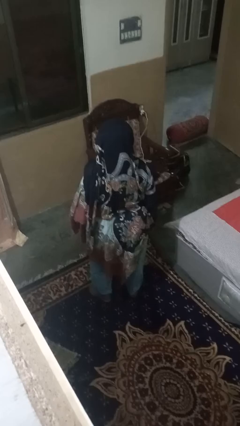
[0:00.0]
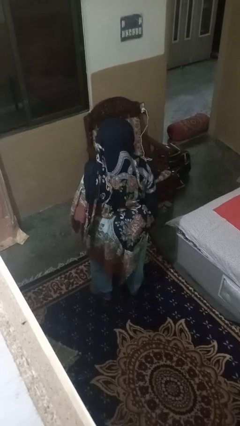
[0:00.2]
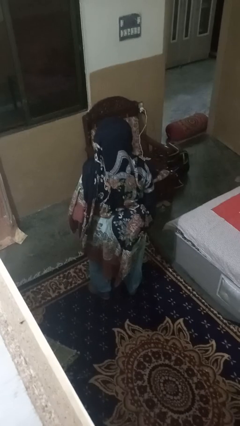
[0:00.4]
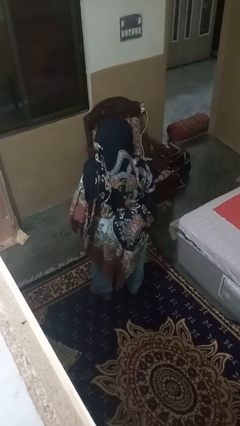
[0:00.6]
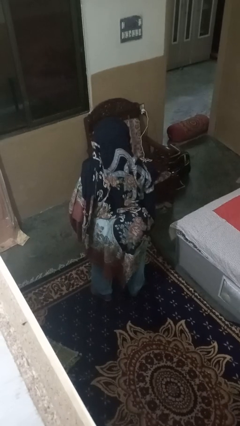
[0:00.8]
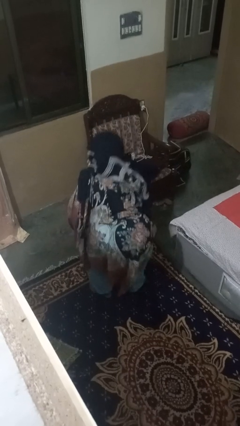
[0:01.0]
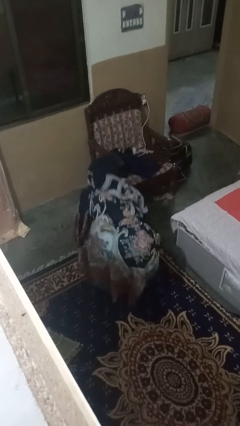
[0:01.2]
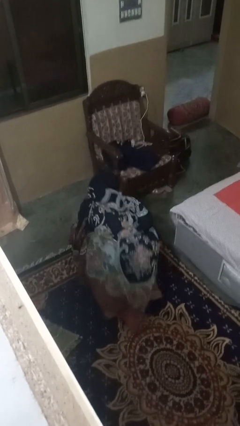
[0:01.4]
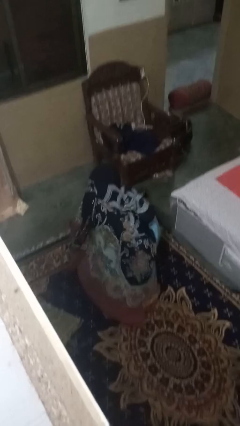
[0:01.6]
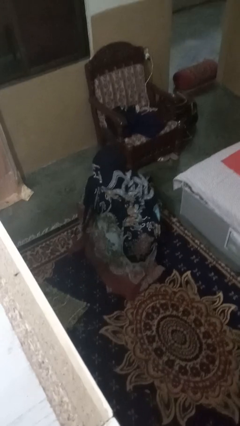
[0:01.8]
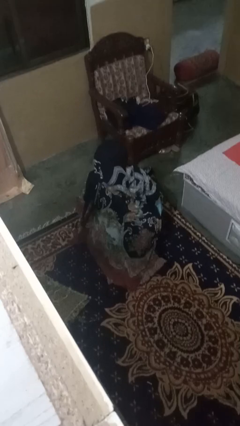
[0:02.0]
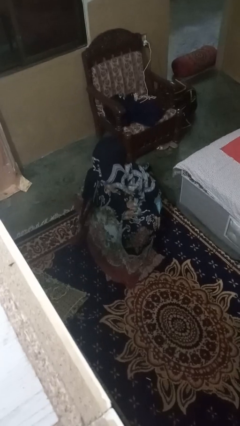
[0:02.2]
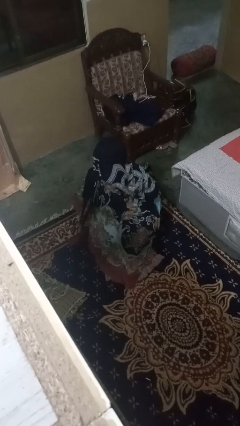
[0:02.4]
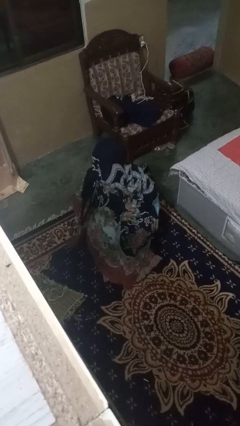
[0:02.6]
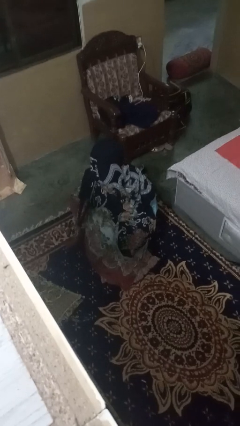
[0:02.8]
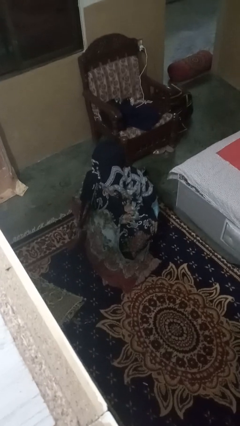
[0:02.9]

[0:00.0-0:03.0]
person squats

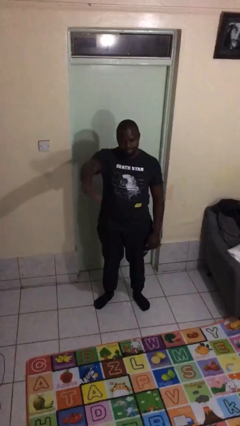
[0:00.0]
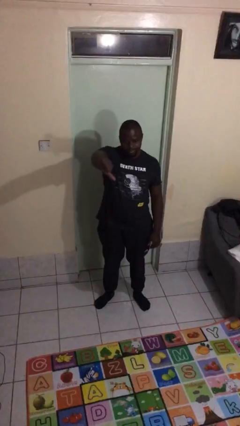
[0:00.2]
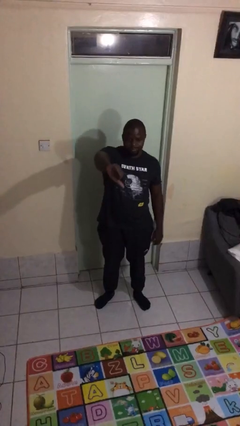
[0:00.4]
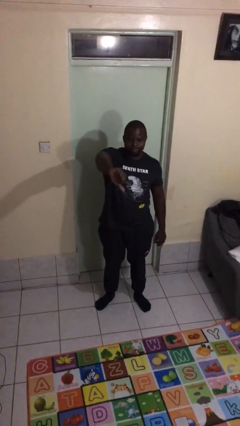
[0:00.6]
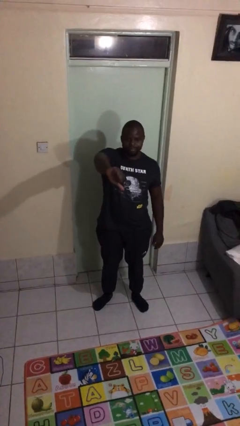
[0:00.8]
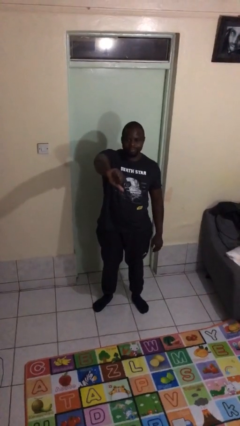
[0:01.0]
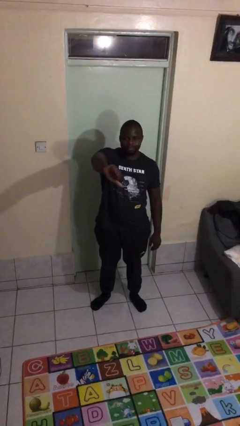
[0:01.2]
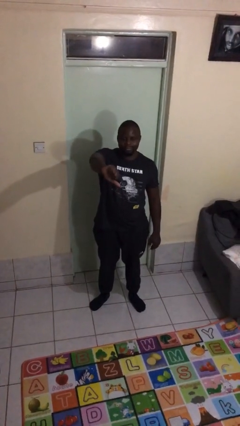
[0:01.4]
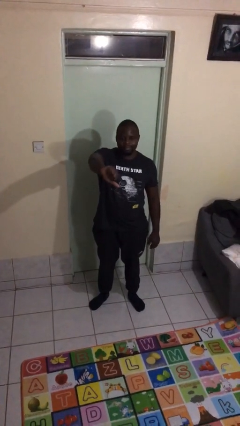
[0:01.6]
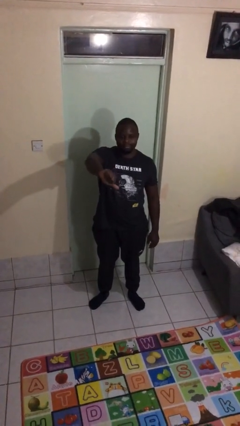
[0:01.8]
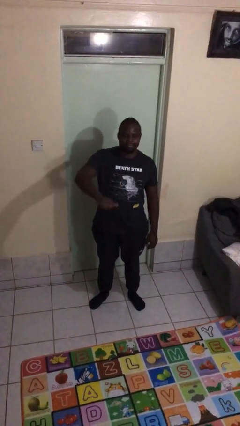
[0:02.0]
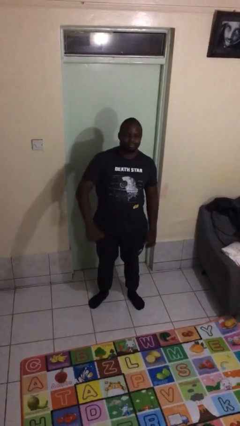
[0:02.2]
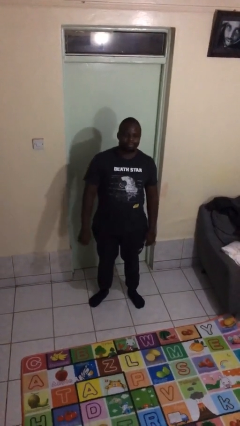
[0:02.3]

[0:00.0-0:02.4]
person gestures thumbs down

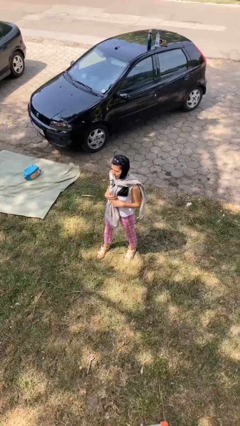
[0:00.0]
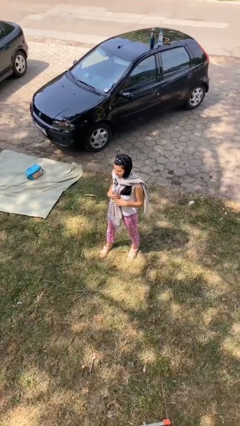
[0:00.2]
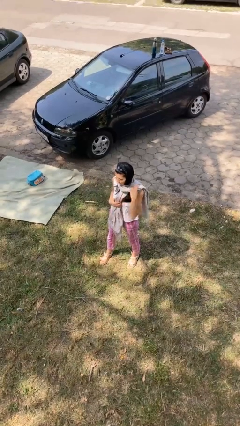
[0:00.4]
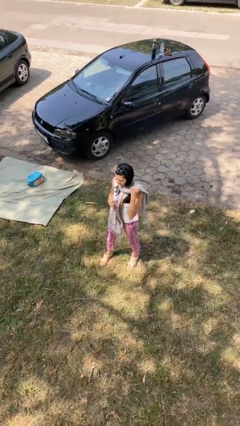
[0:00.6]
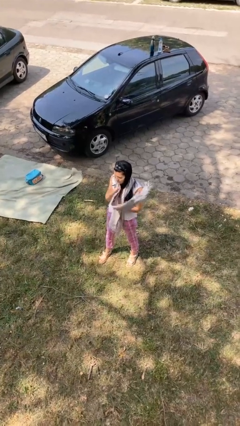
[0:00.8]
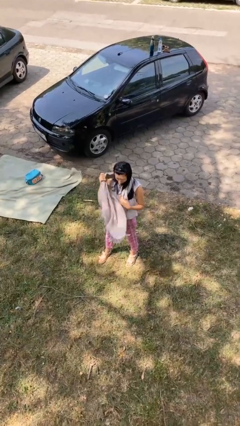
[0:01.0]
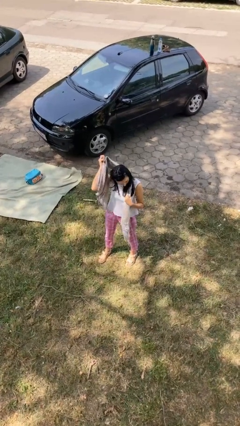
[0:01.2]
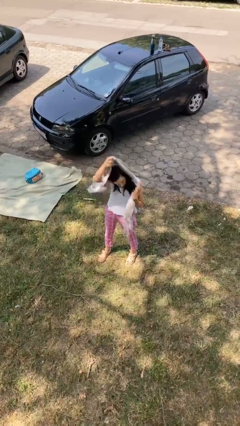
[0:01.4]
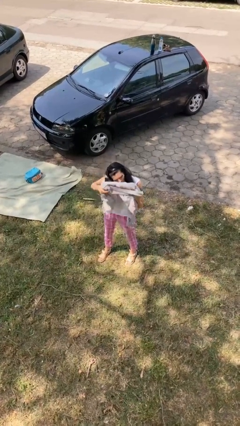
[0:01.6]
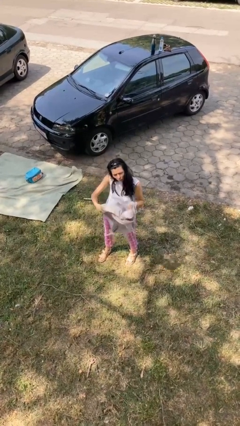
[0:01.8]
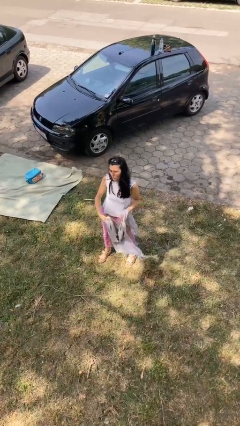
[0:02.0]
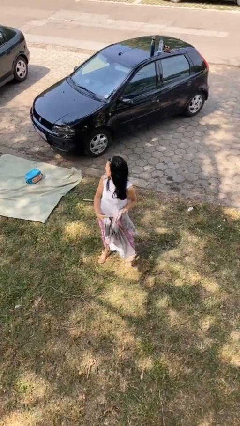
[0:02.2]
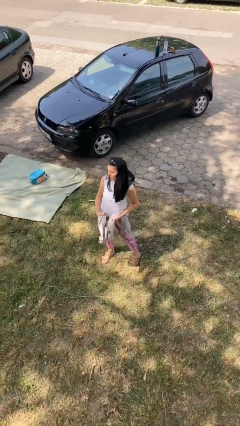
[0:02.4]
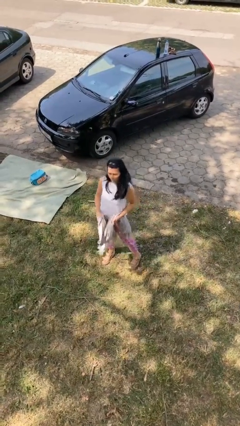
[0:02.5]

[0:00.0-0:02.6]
person takes off scarf

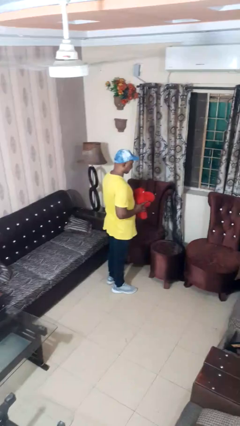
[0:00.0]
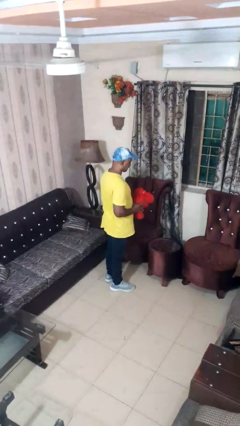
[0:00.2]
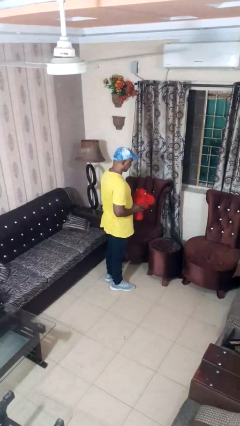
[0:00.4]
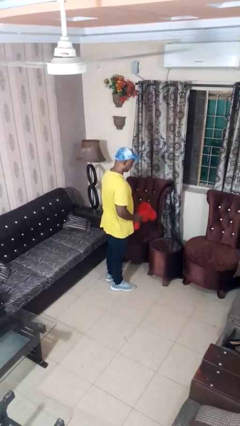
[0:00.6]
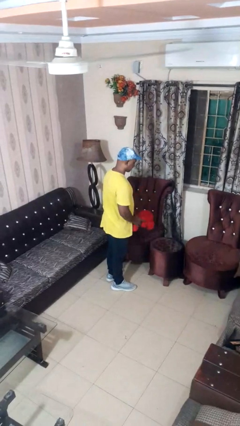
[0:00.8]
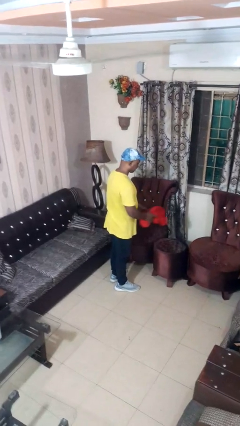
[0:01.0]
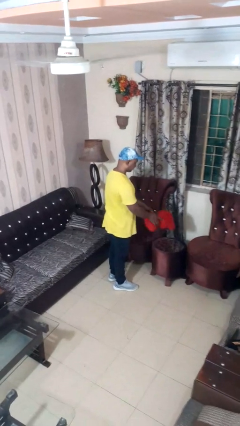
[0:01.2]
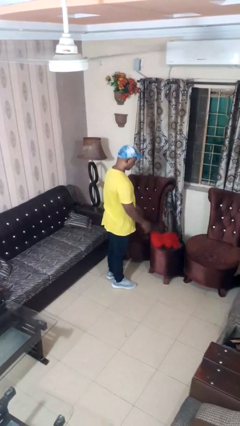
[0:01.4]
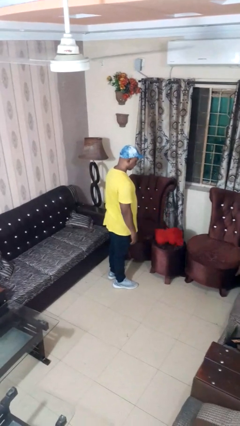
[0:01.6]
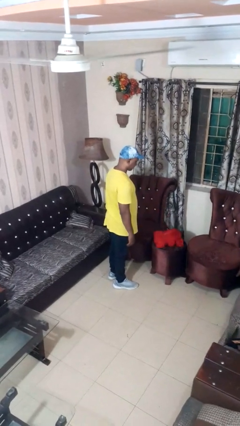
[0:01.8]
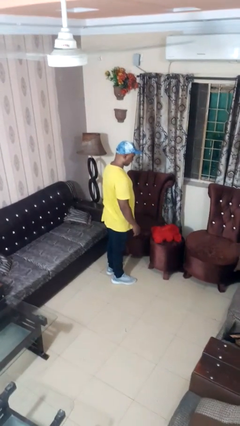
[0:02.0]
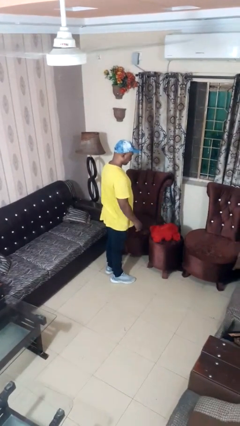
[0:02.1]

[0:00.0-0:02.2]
person throws object on table

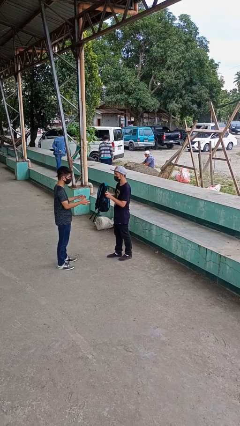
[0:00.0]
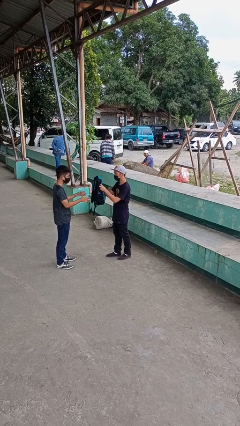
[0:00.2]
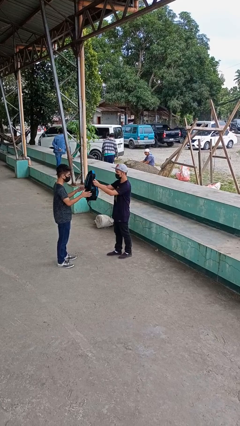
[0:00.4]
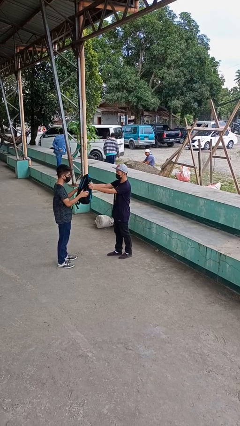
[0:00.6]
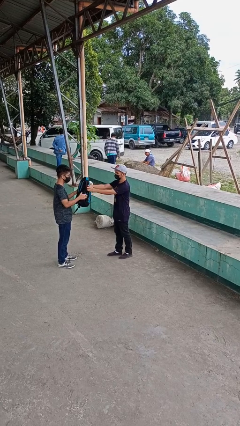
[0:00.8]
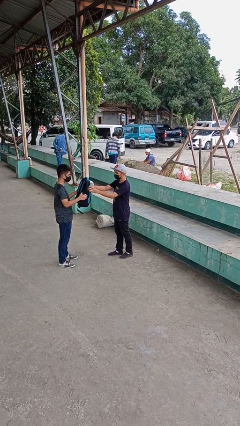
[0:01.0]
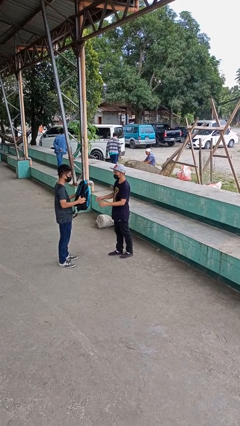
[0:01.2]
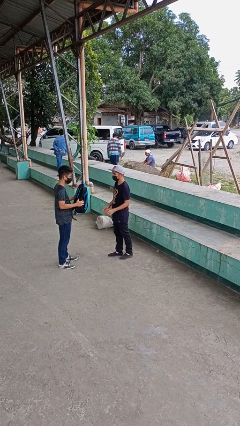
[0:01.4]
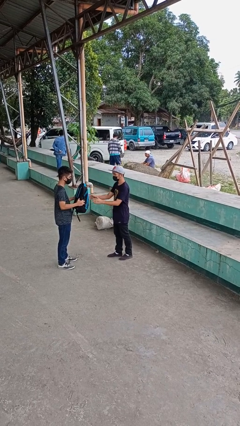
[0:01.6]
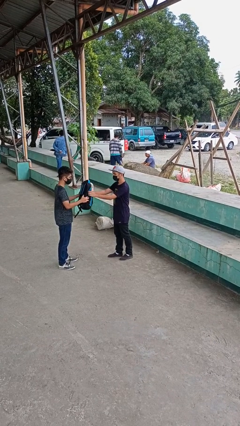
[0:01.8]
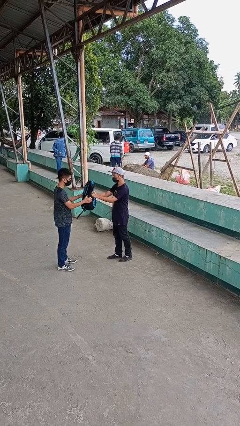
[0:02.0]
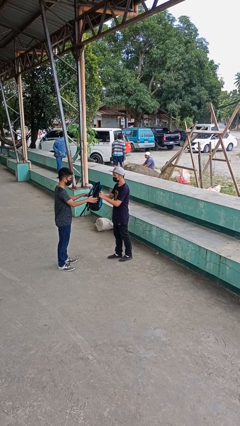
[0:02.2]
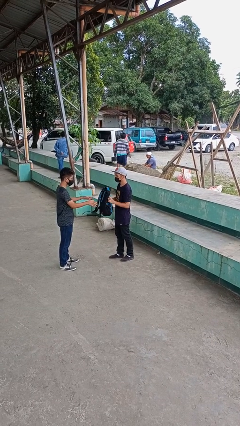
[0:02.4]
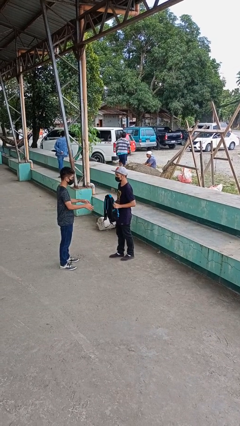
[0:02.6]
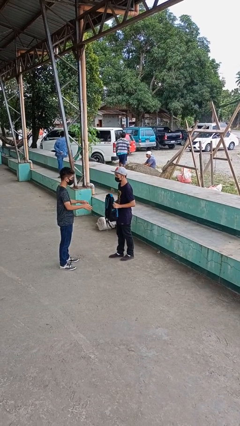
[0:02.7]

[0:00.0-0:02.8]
person transfers object to person

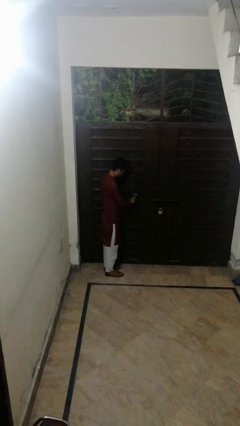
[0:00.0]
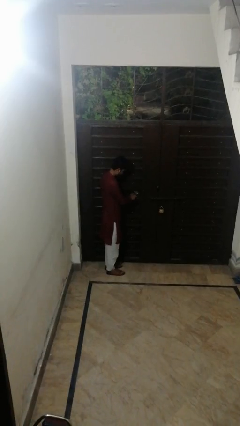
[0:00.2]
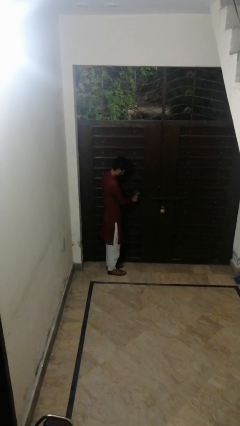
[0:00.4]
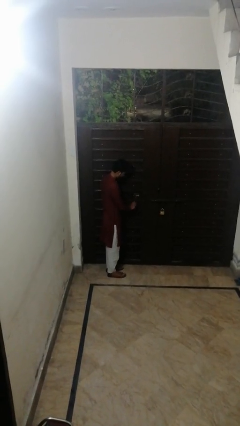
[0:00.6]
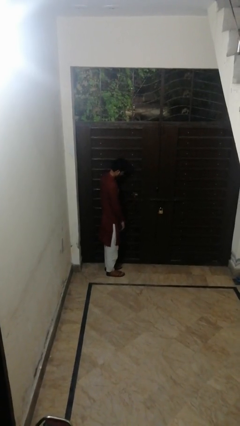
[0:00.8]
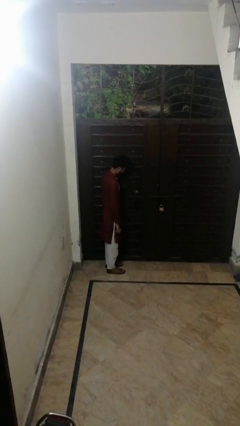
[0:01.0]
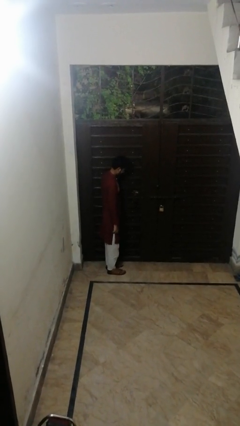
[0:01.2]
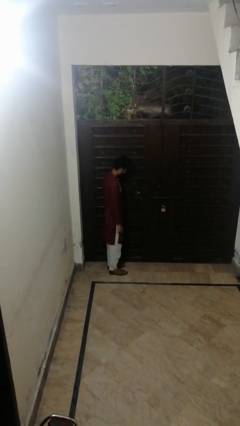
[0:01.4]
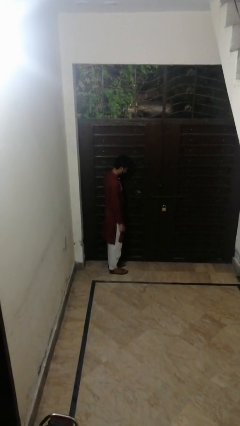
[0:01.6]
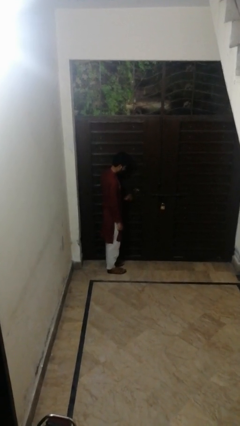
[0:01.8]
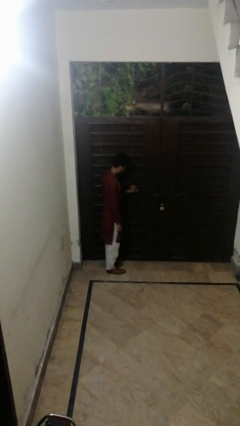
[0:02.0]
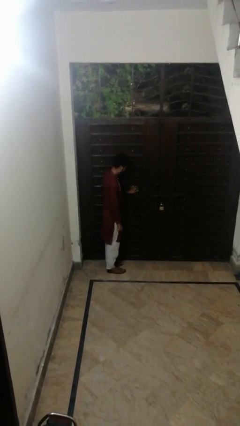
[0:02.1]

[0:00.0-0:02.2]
person unlocks door with keys

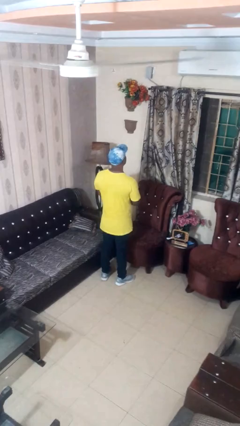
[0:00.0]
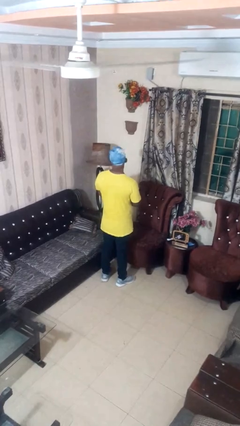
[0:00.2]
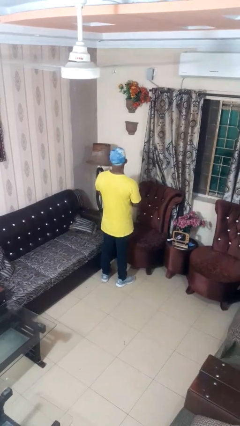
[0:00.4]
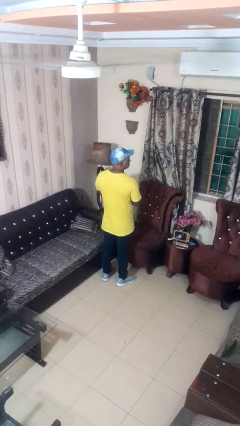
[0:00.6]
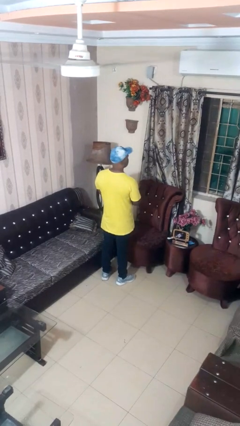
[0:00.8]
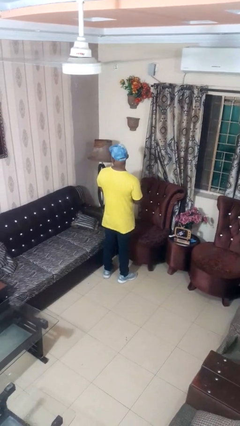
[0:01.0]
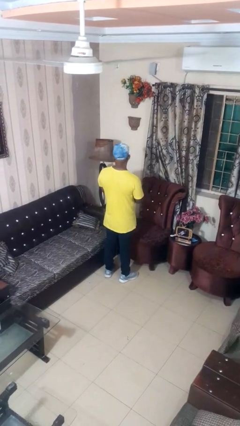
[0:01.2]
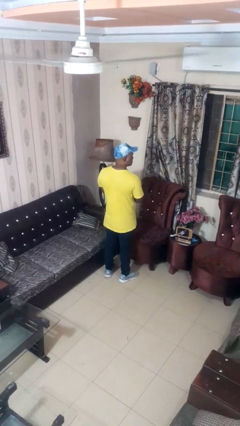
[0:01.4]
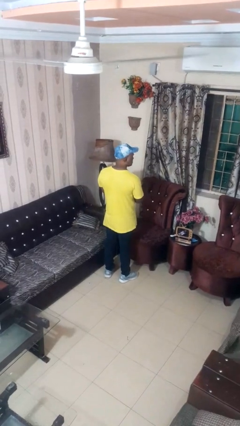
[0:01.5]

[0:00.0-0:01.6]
person nods head

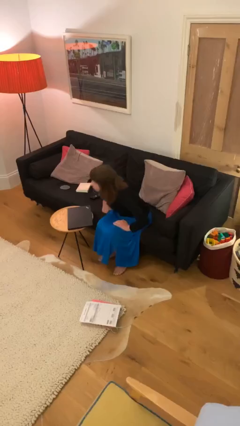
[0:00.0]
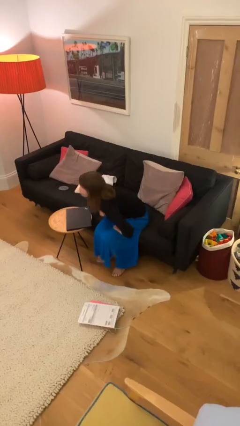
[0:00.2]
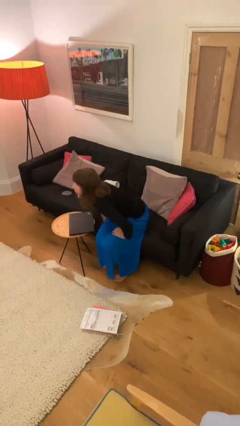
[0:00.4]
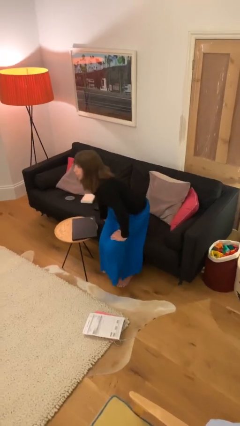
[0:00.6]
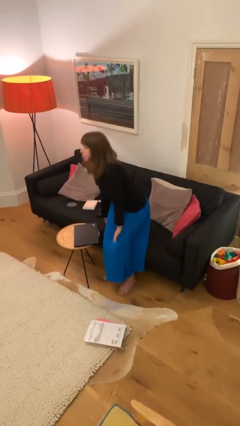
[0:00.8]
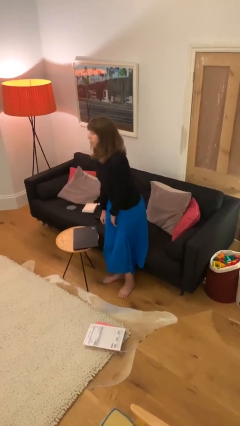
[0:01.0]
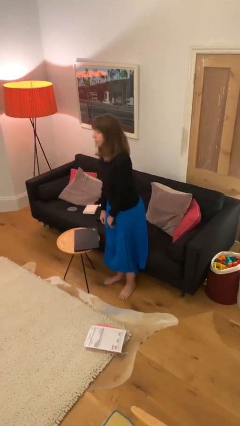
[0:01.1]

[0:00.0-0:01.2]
person stands up